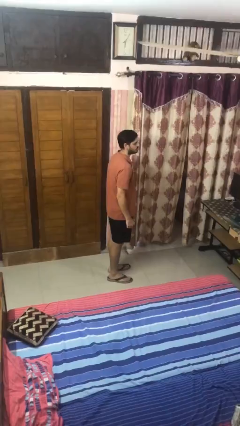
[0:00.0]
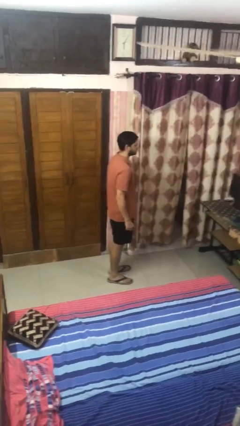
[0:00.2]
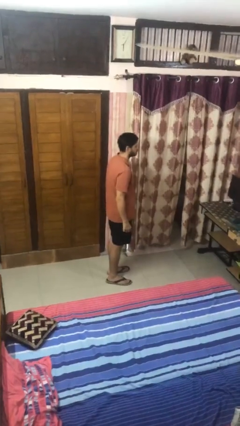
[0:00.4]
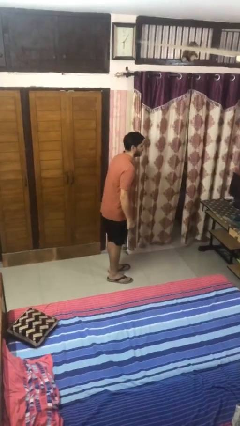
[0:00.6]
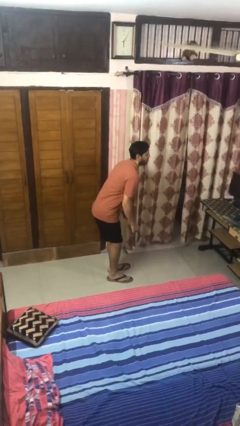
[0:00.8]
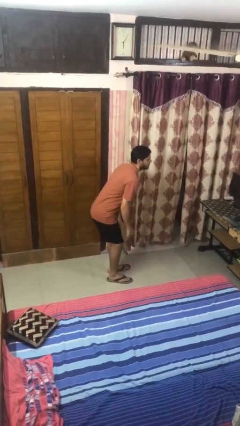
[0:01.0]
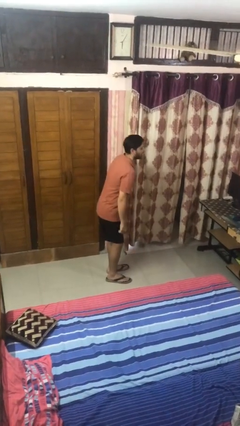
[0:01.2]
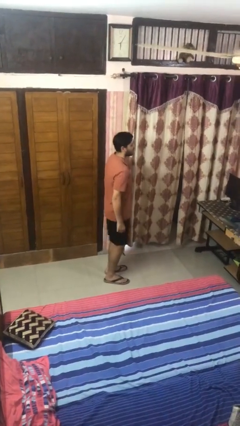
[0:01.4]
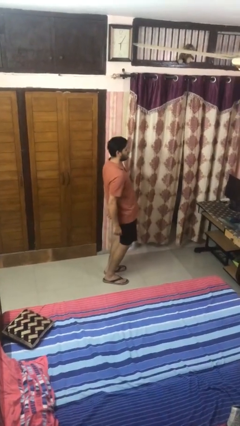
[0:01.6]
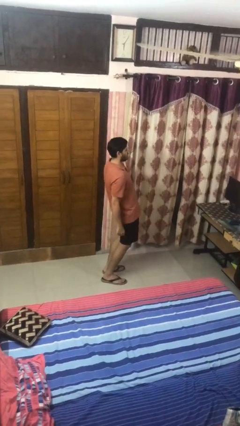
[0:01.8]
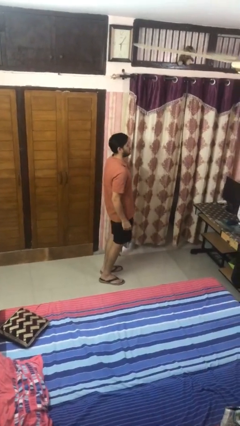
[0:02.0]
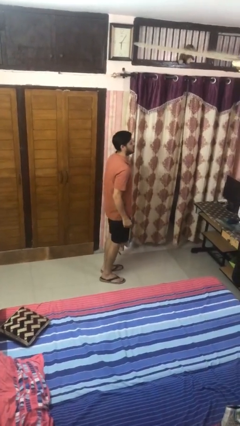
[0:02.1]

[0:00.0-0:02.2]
person wiggles hips

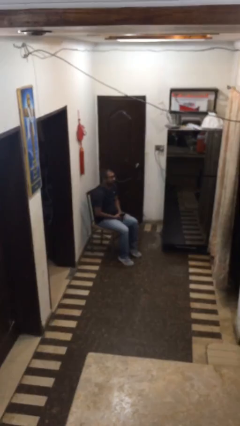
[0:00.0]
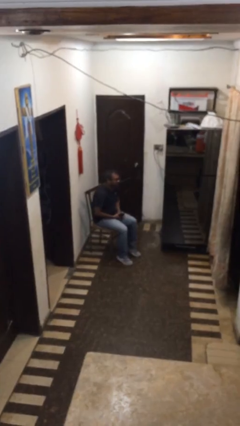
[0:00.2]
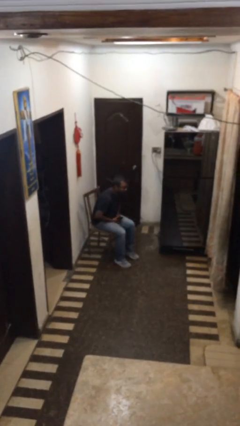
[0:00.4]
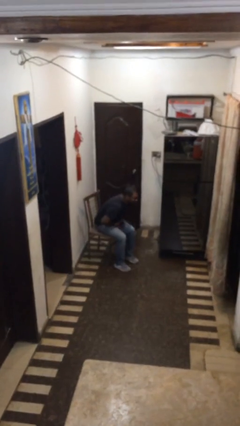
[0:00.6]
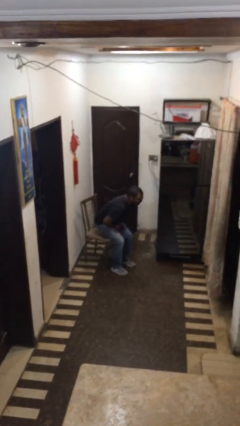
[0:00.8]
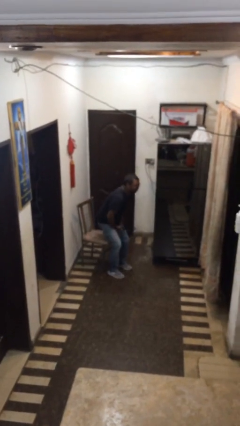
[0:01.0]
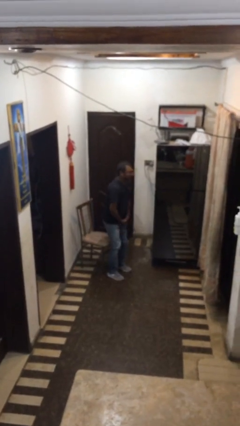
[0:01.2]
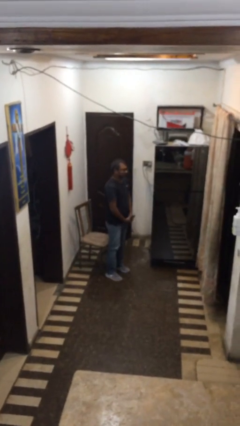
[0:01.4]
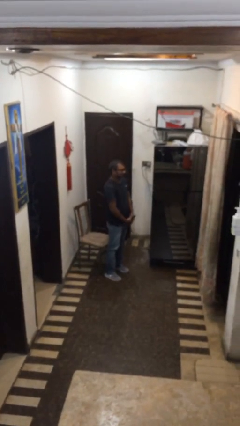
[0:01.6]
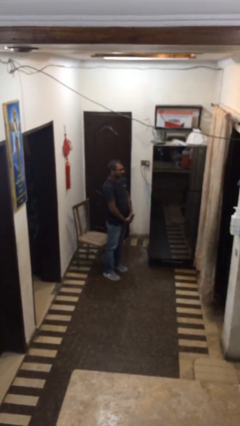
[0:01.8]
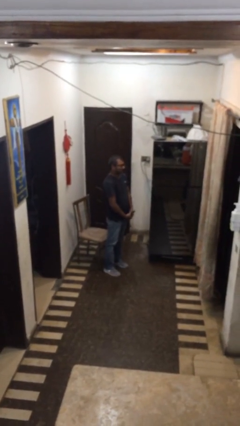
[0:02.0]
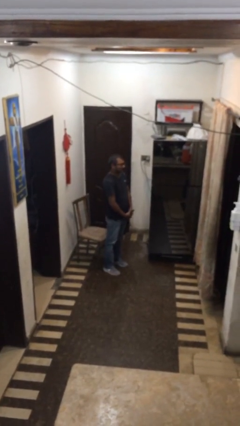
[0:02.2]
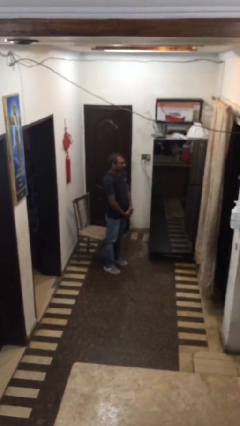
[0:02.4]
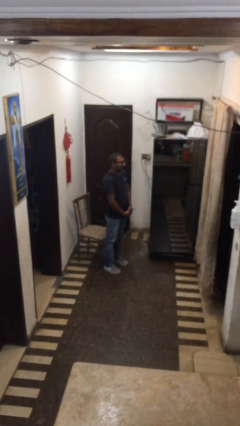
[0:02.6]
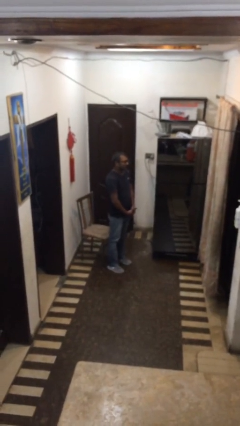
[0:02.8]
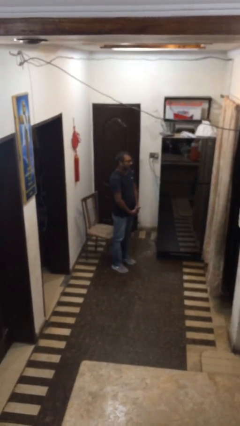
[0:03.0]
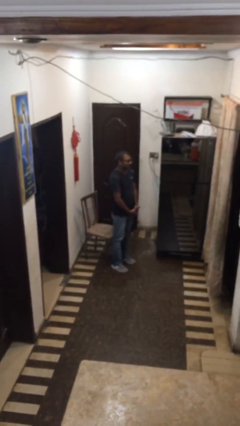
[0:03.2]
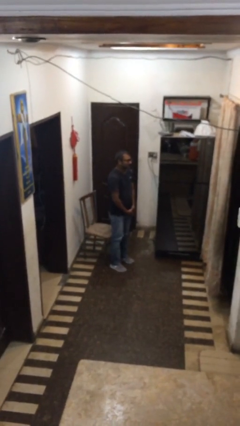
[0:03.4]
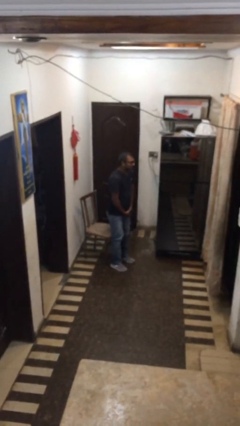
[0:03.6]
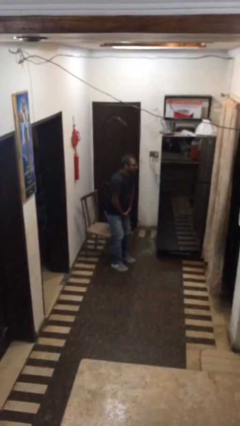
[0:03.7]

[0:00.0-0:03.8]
person stands up

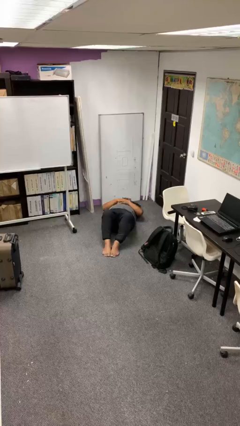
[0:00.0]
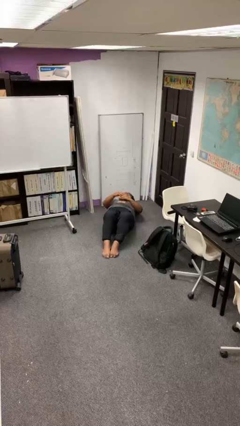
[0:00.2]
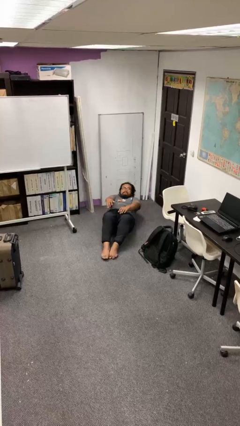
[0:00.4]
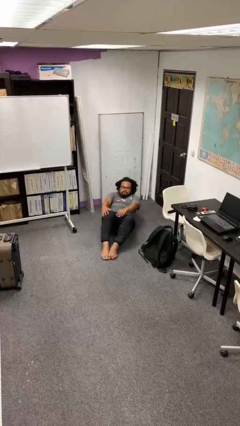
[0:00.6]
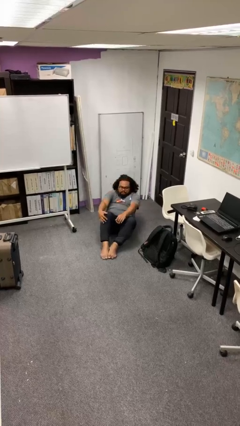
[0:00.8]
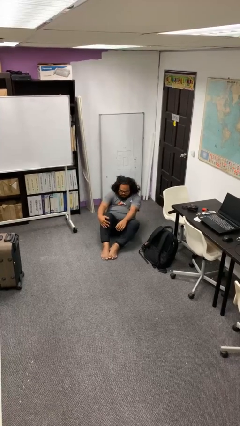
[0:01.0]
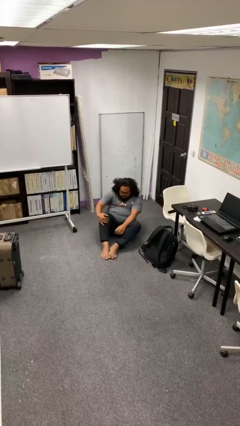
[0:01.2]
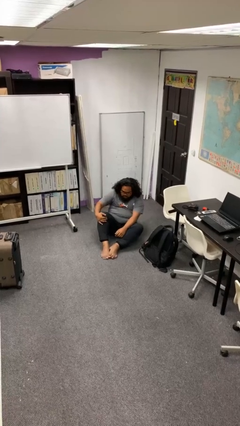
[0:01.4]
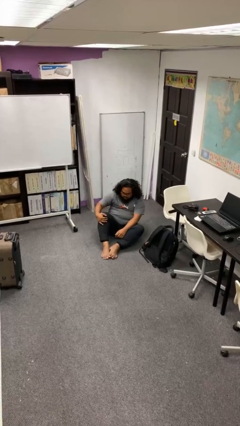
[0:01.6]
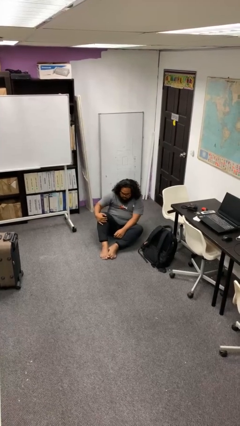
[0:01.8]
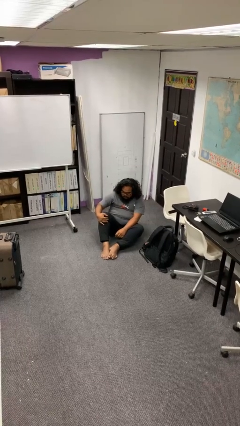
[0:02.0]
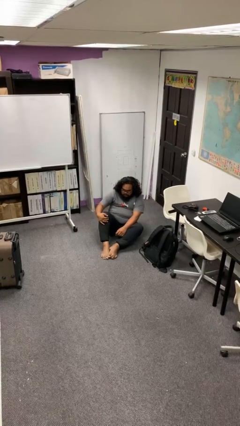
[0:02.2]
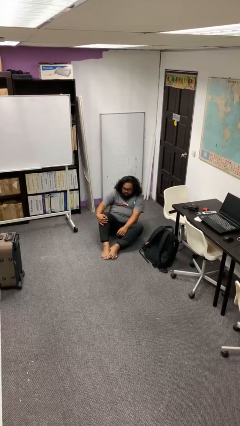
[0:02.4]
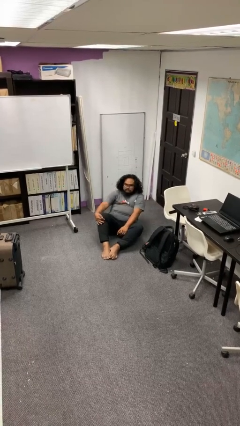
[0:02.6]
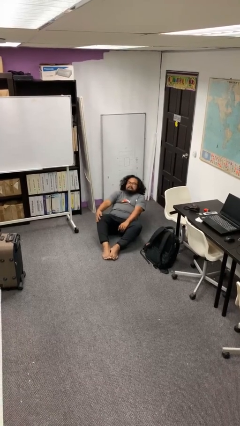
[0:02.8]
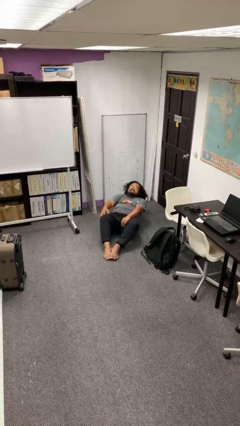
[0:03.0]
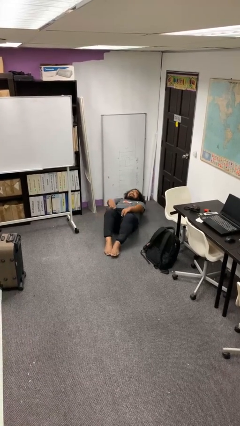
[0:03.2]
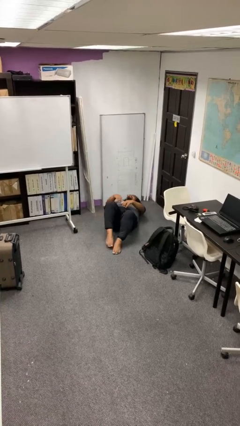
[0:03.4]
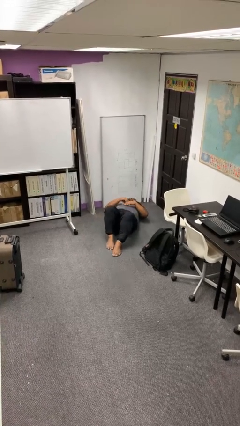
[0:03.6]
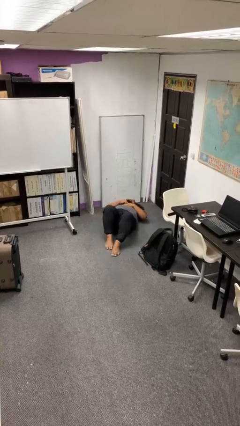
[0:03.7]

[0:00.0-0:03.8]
person exercises with situp

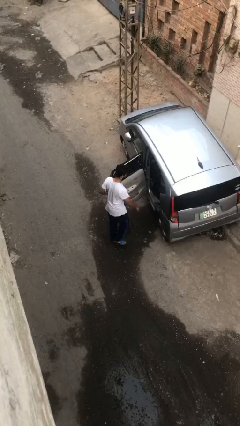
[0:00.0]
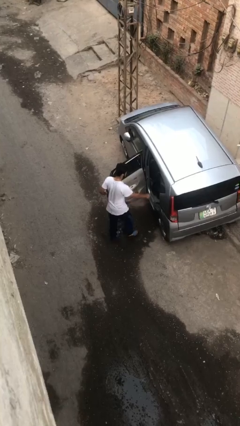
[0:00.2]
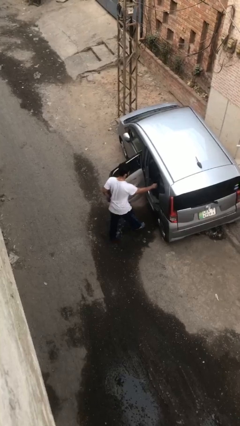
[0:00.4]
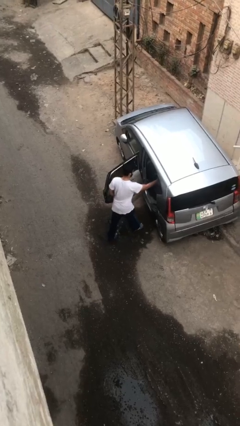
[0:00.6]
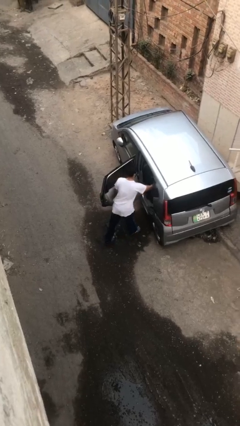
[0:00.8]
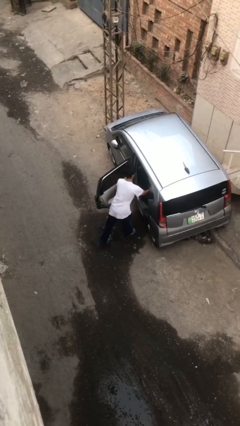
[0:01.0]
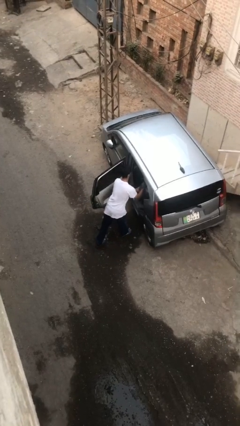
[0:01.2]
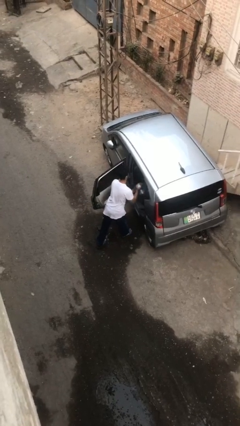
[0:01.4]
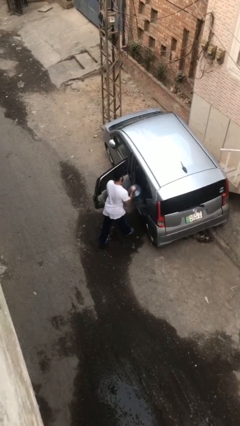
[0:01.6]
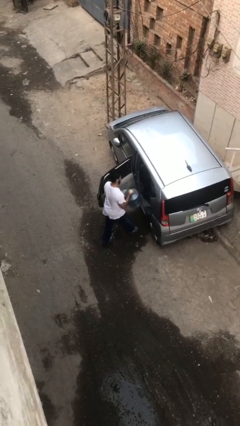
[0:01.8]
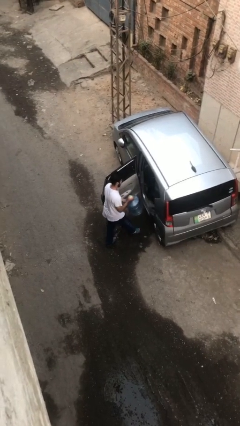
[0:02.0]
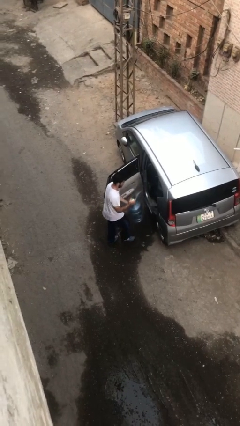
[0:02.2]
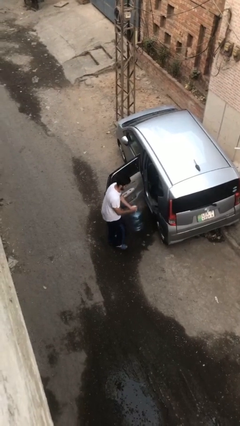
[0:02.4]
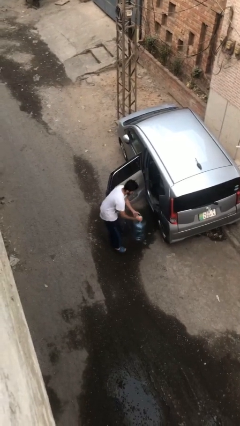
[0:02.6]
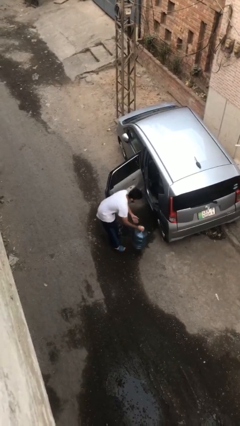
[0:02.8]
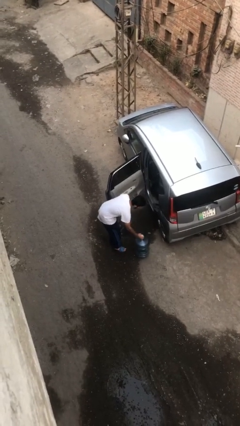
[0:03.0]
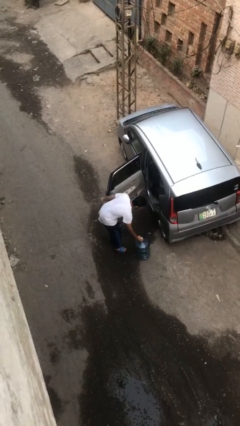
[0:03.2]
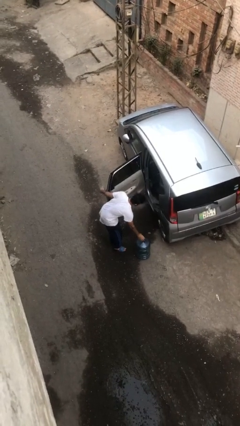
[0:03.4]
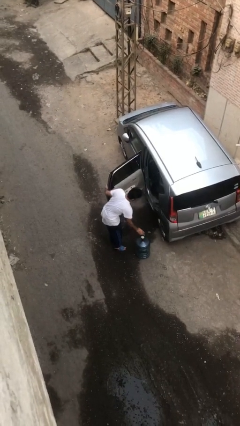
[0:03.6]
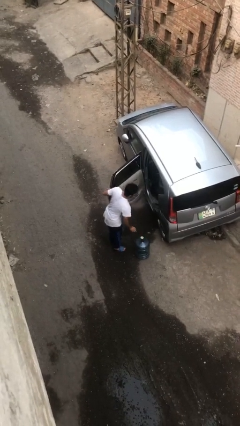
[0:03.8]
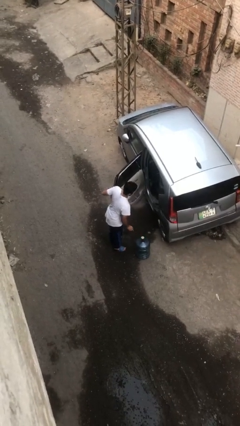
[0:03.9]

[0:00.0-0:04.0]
person unloads car

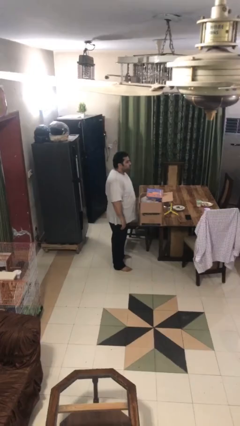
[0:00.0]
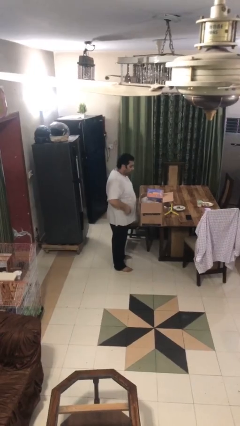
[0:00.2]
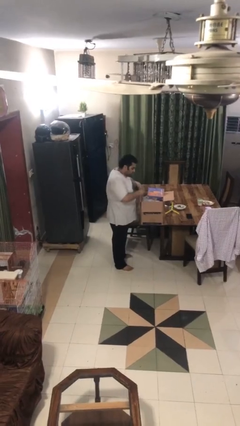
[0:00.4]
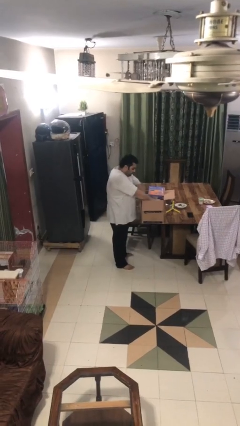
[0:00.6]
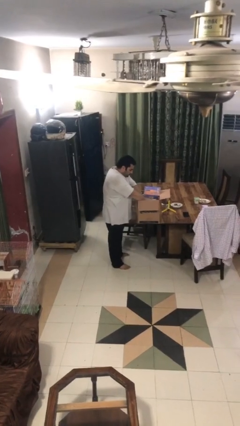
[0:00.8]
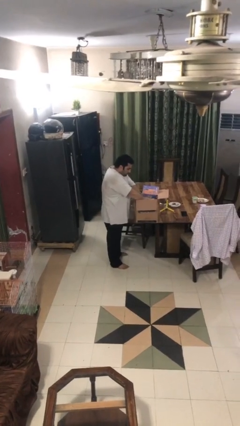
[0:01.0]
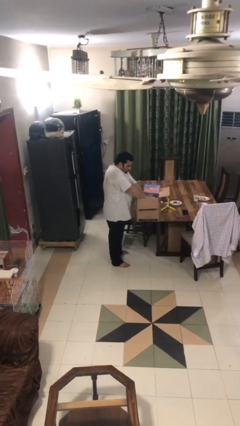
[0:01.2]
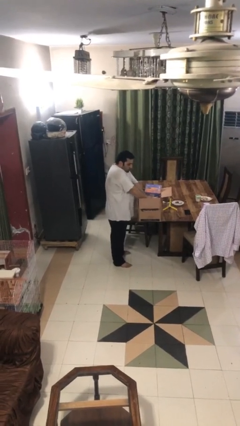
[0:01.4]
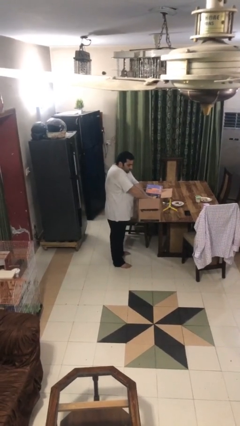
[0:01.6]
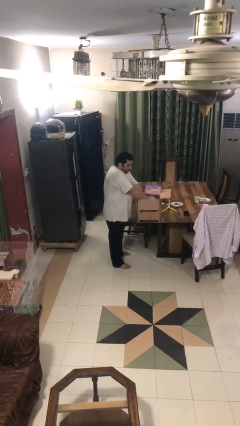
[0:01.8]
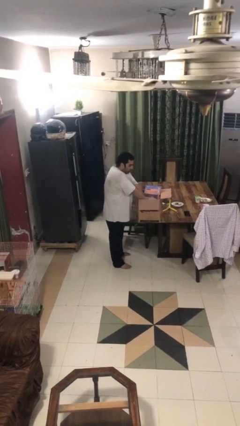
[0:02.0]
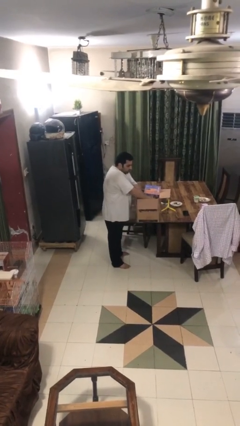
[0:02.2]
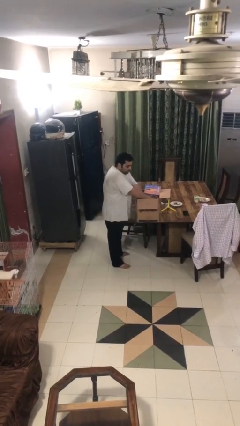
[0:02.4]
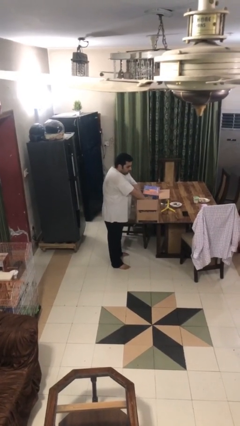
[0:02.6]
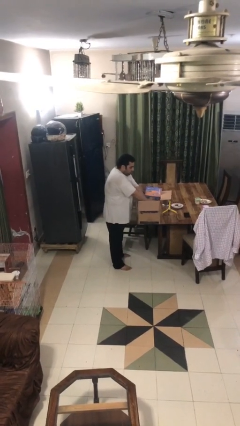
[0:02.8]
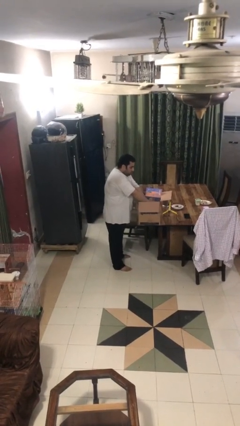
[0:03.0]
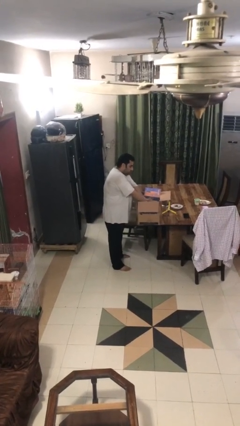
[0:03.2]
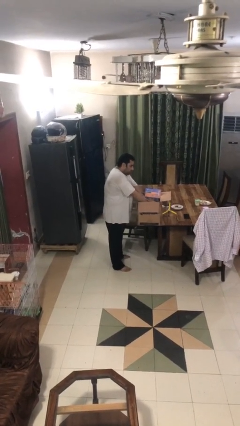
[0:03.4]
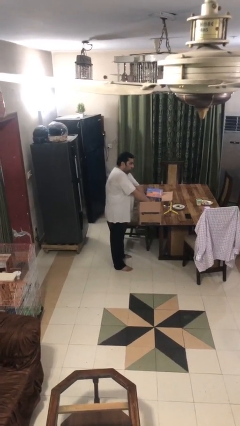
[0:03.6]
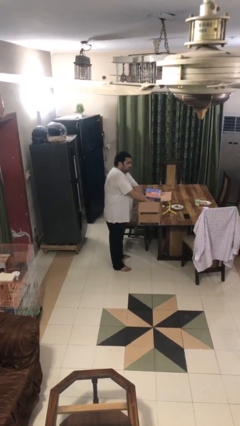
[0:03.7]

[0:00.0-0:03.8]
person searches in box
